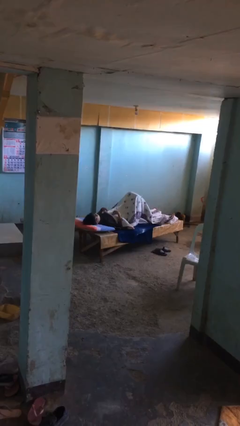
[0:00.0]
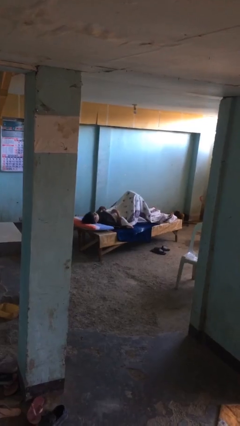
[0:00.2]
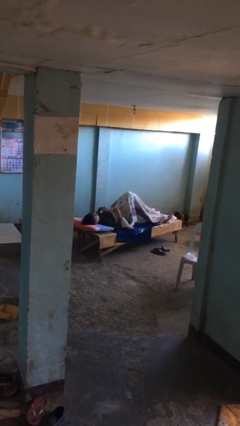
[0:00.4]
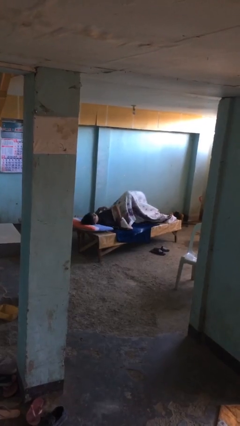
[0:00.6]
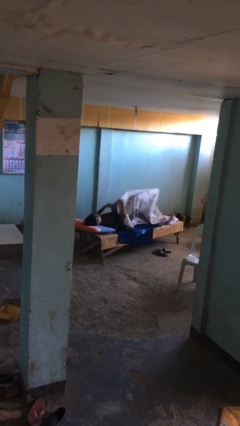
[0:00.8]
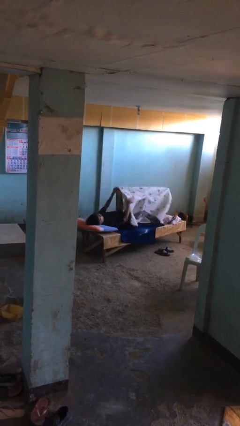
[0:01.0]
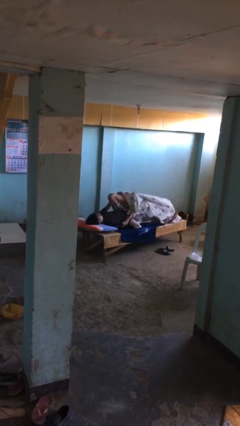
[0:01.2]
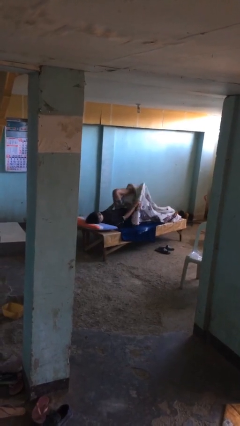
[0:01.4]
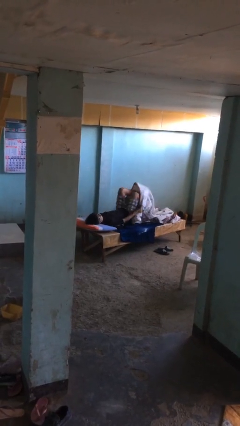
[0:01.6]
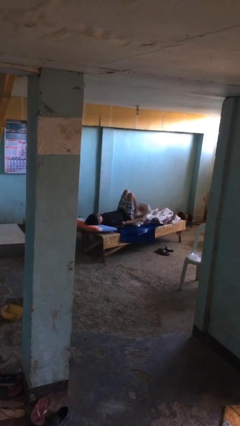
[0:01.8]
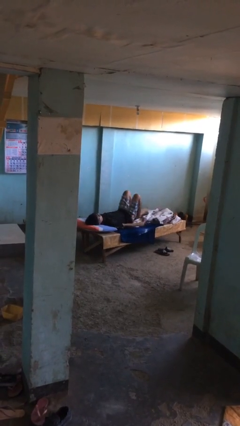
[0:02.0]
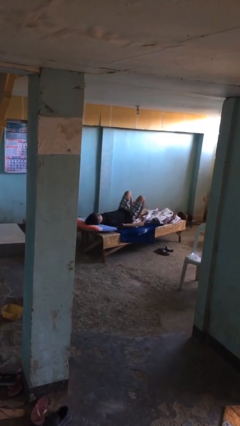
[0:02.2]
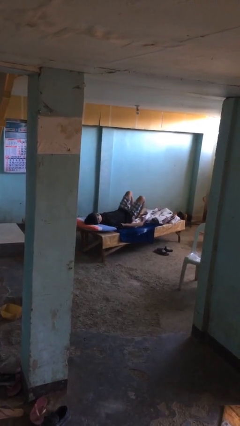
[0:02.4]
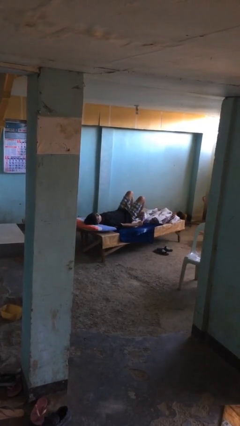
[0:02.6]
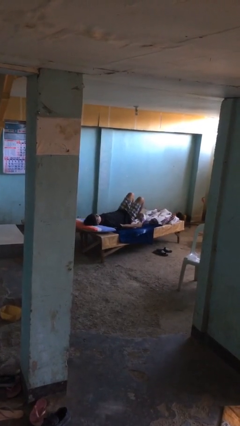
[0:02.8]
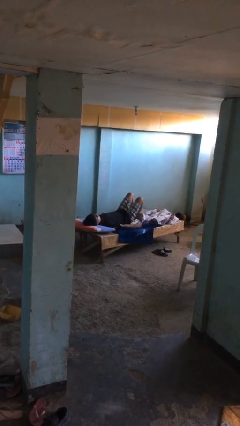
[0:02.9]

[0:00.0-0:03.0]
person uncovers with bedsheets

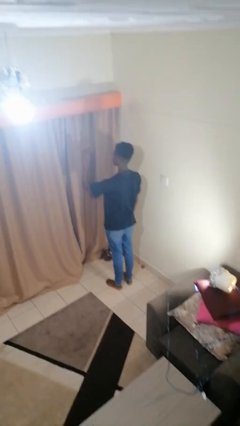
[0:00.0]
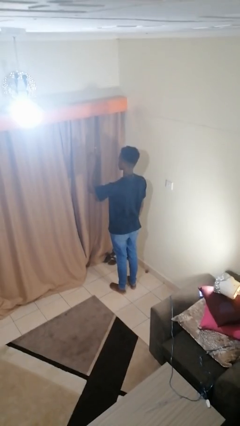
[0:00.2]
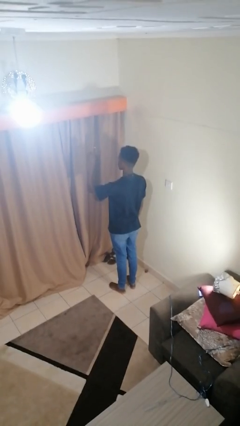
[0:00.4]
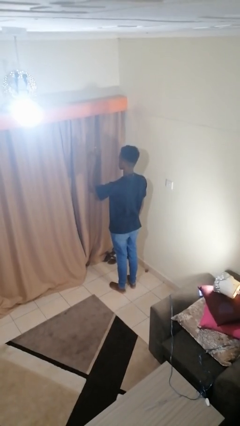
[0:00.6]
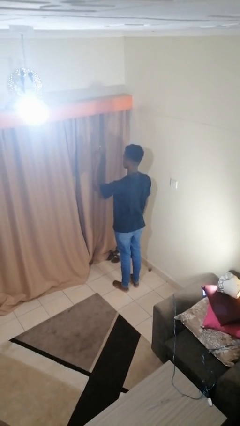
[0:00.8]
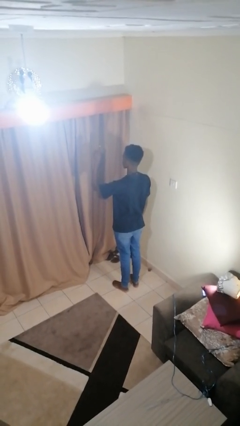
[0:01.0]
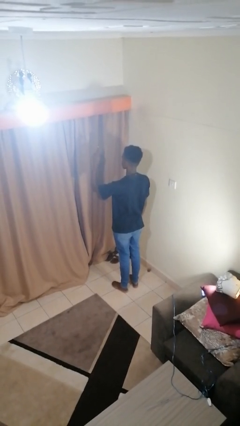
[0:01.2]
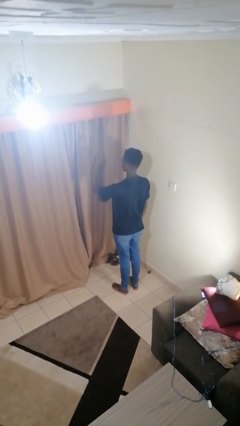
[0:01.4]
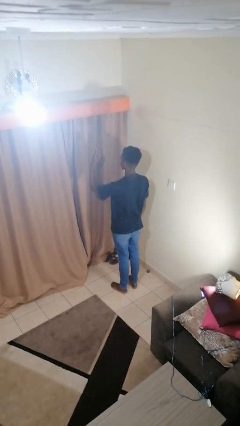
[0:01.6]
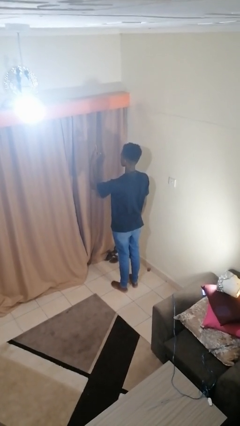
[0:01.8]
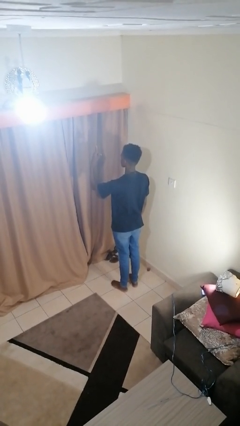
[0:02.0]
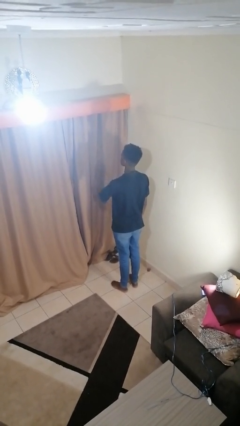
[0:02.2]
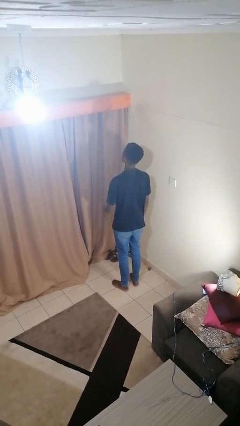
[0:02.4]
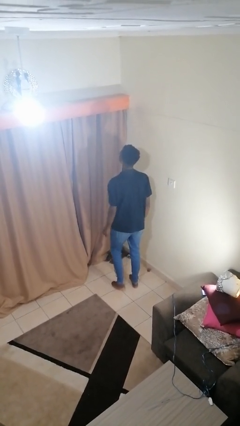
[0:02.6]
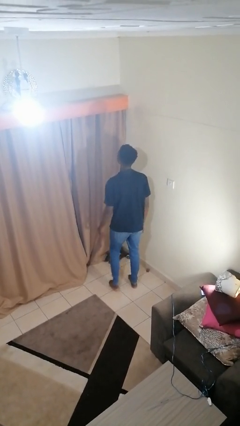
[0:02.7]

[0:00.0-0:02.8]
person gestures number one

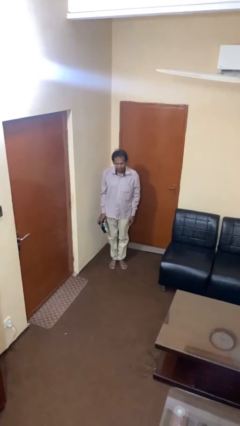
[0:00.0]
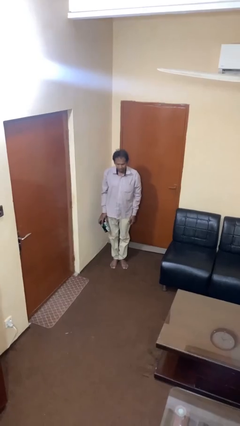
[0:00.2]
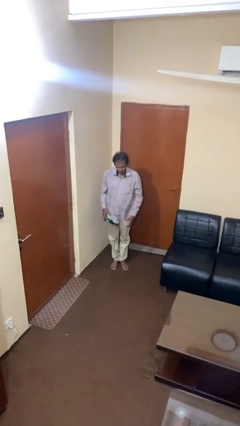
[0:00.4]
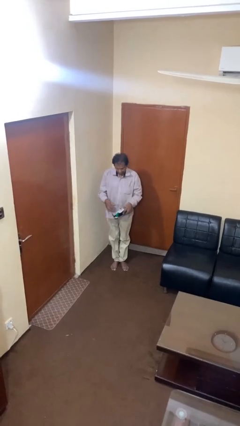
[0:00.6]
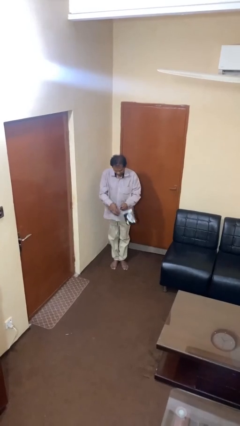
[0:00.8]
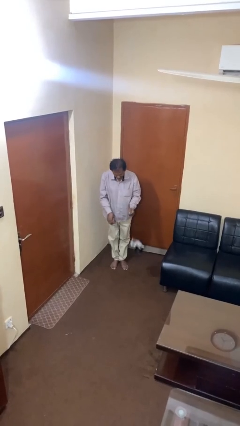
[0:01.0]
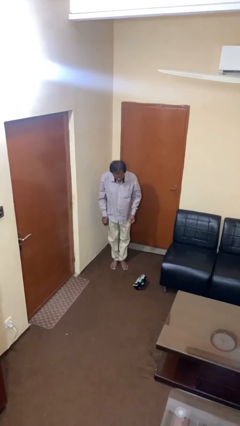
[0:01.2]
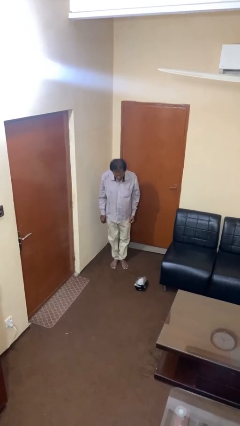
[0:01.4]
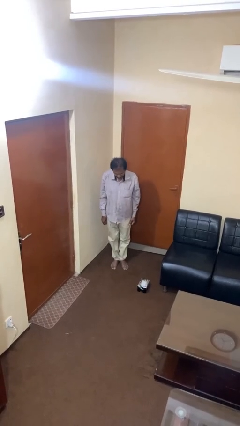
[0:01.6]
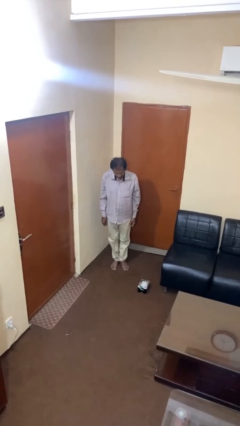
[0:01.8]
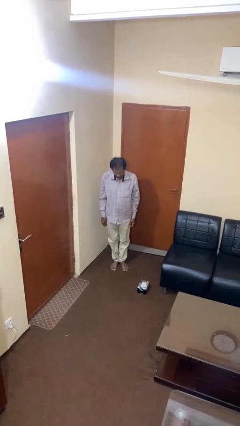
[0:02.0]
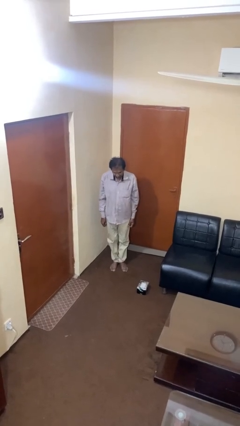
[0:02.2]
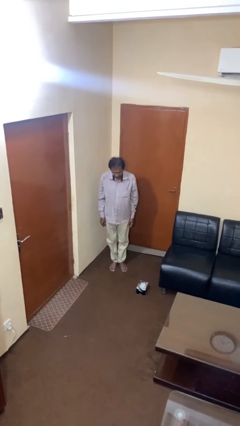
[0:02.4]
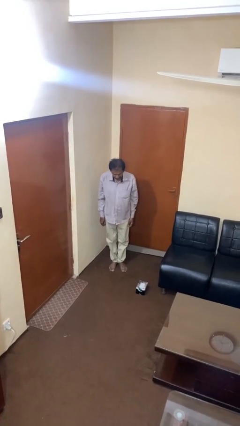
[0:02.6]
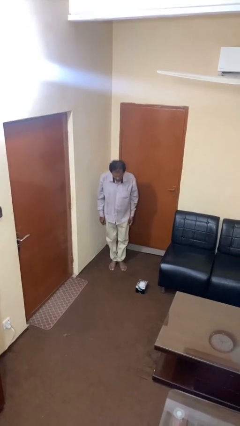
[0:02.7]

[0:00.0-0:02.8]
person drops object

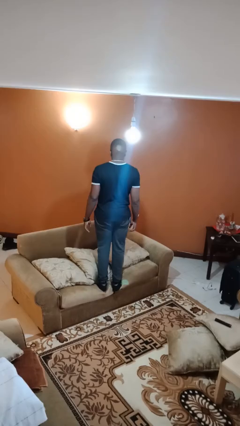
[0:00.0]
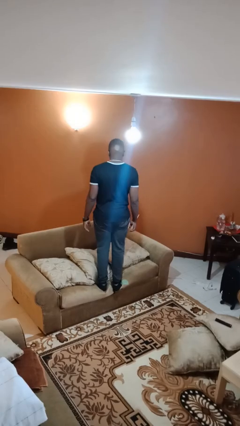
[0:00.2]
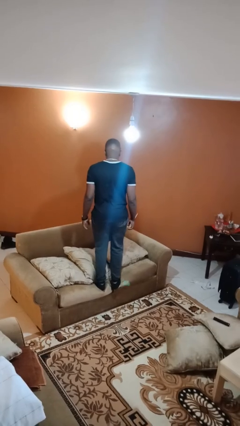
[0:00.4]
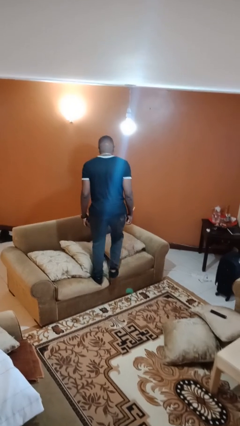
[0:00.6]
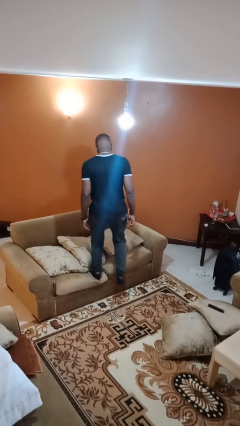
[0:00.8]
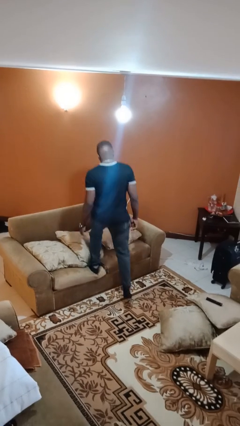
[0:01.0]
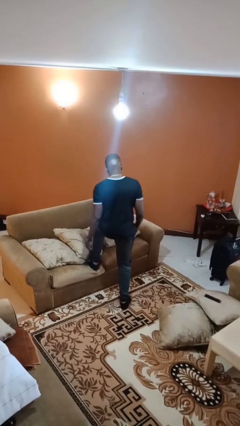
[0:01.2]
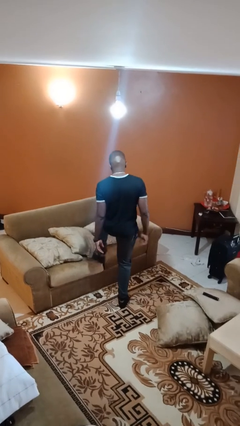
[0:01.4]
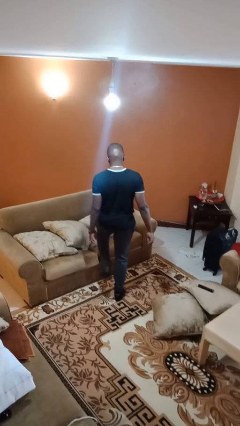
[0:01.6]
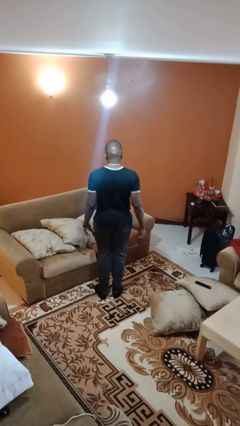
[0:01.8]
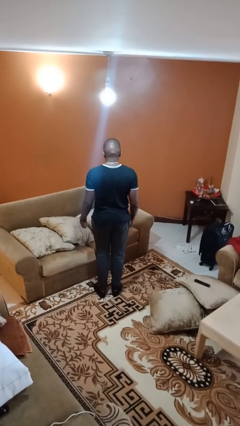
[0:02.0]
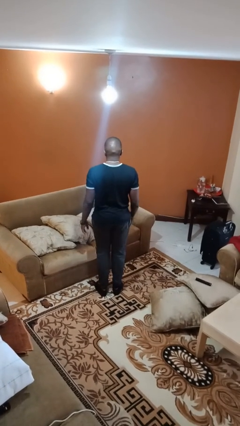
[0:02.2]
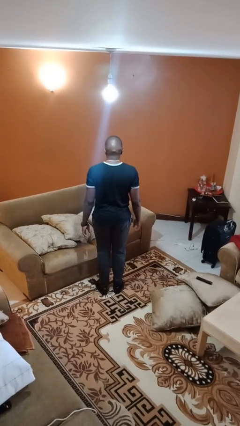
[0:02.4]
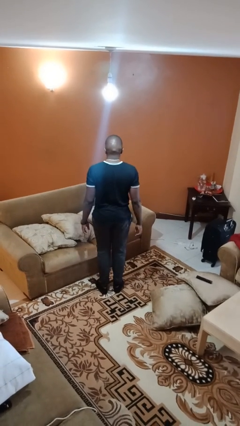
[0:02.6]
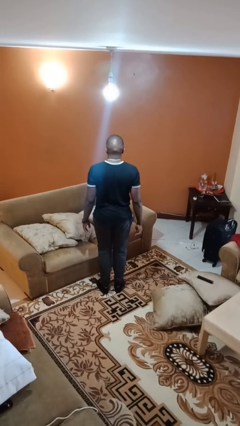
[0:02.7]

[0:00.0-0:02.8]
person climbs off couch

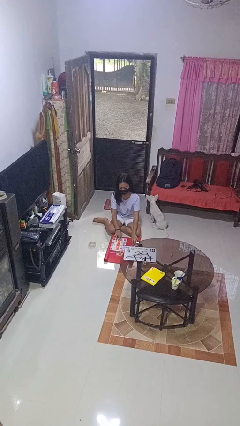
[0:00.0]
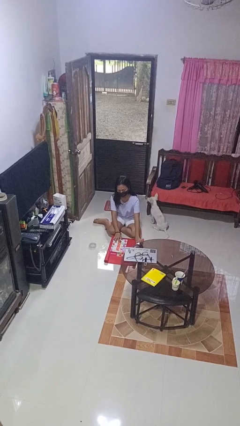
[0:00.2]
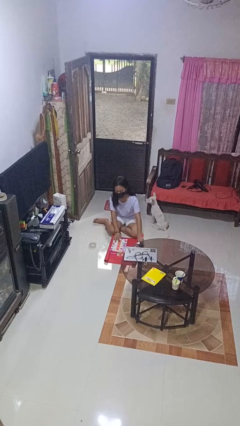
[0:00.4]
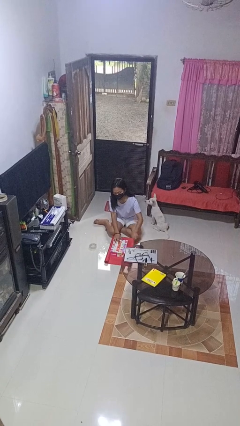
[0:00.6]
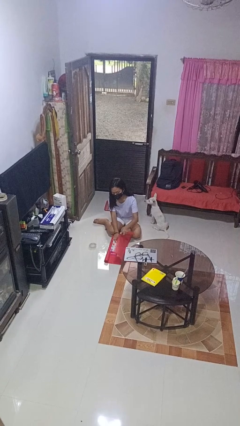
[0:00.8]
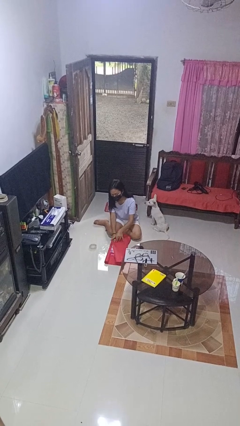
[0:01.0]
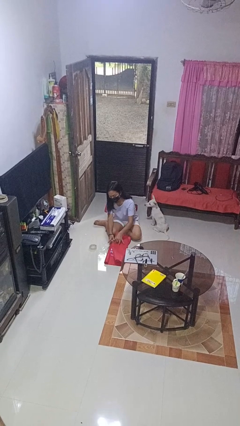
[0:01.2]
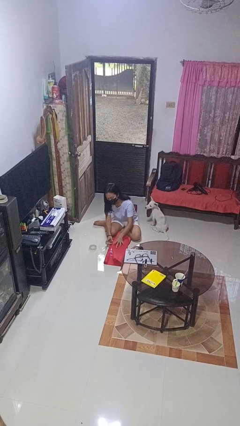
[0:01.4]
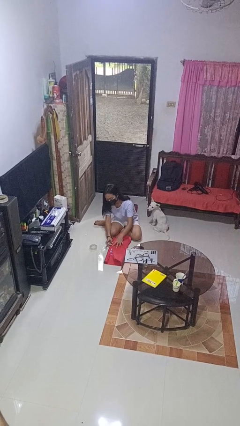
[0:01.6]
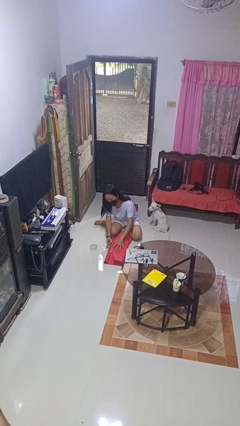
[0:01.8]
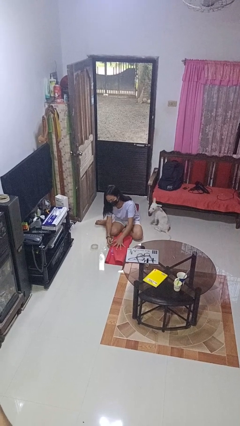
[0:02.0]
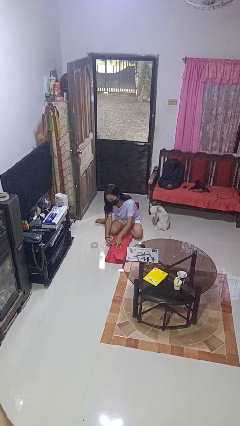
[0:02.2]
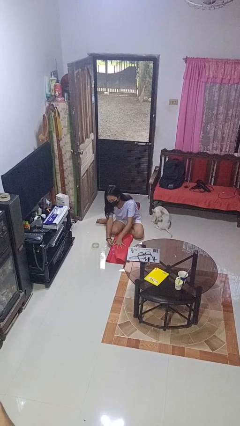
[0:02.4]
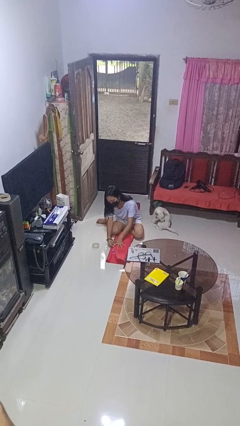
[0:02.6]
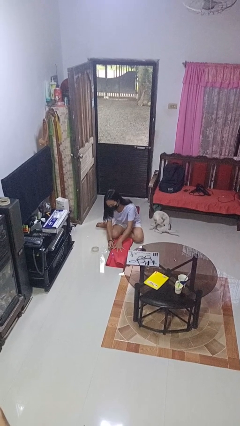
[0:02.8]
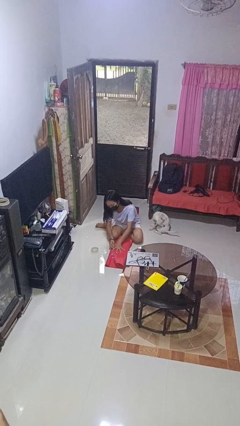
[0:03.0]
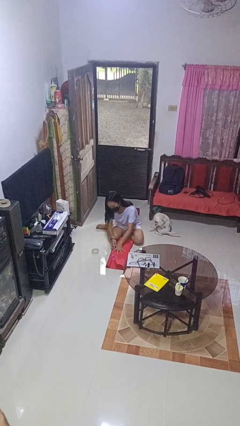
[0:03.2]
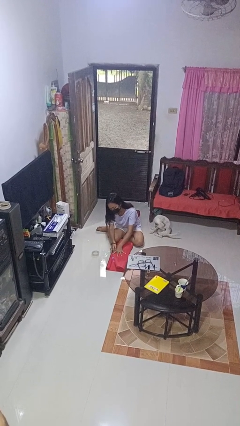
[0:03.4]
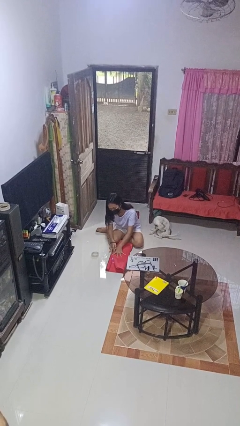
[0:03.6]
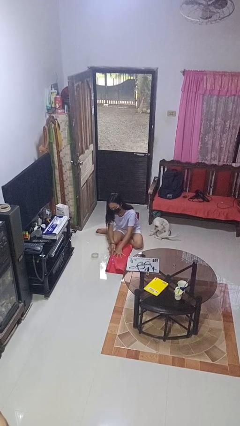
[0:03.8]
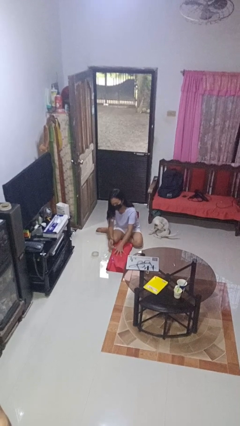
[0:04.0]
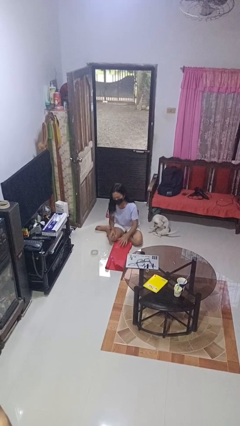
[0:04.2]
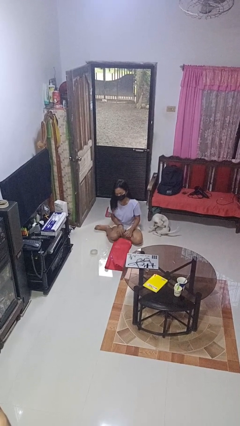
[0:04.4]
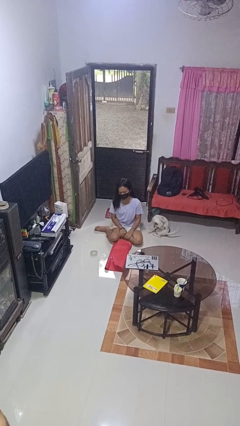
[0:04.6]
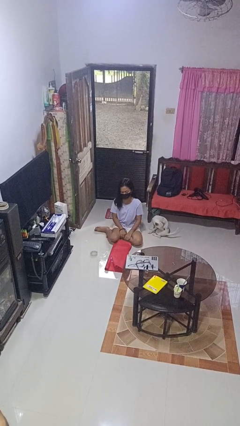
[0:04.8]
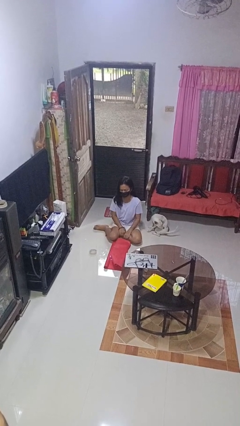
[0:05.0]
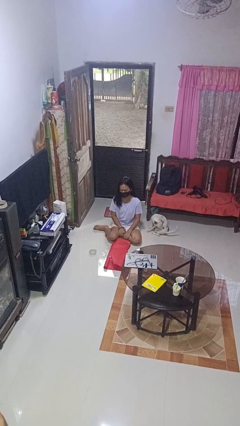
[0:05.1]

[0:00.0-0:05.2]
person wraps box

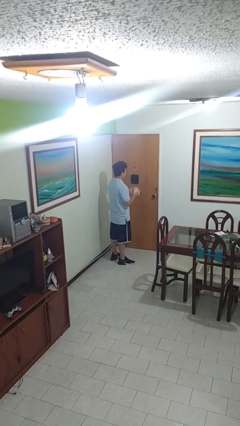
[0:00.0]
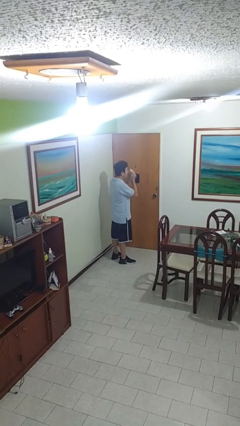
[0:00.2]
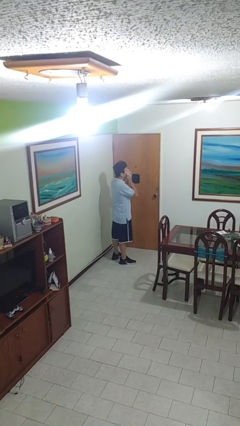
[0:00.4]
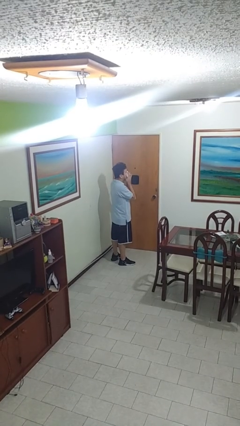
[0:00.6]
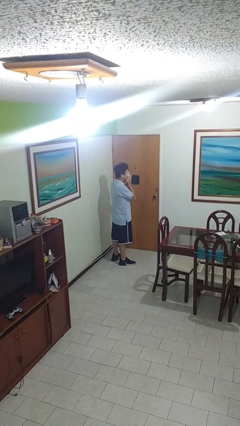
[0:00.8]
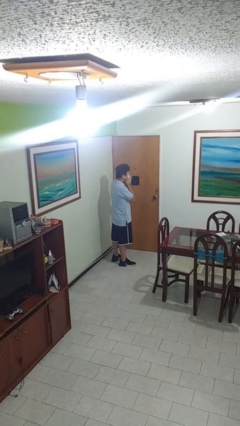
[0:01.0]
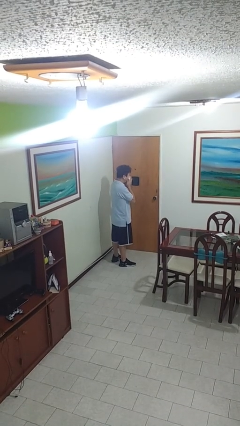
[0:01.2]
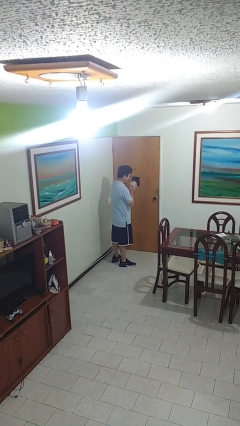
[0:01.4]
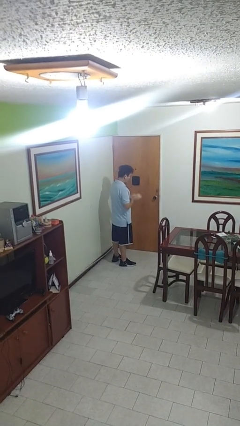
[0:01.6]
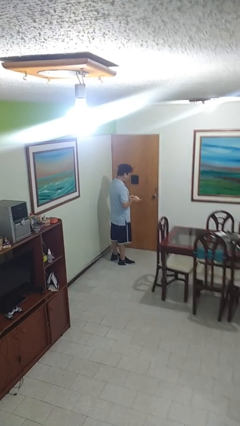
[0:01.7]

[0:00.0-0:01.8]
person blows nose
